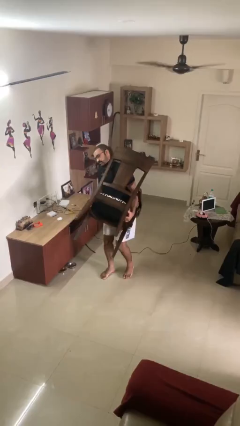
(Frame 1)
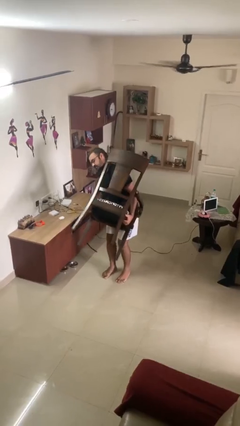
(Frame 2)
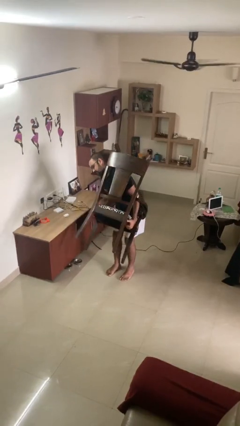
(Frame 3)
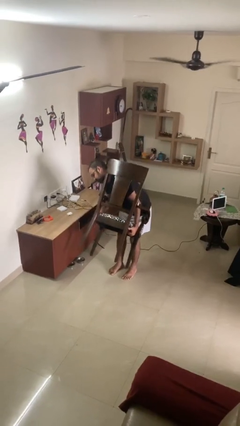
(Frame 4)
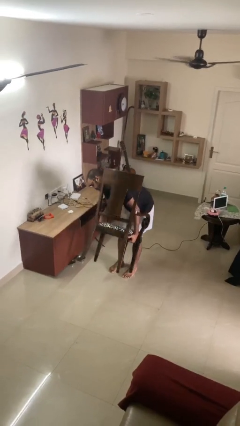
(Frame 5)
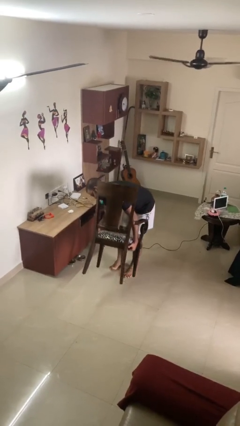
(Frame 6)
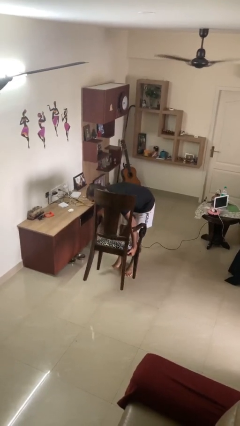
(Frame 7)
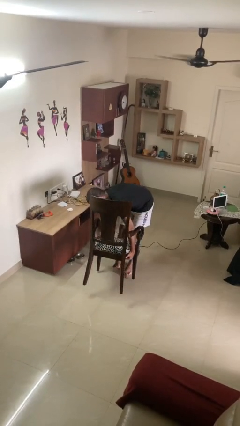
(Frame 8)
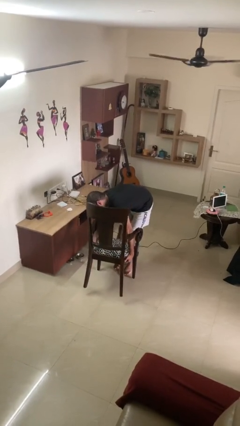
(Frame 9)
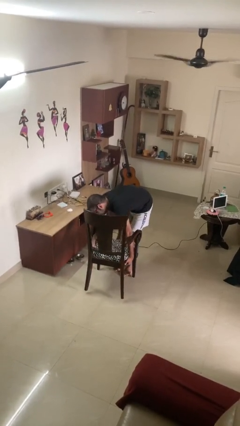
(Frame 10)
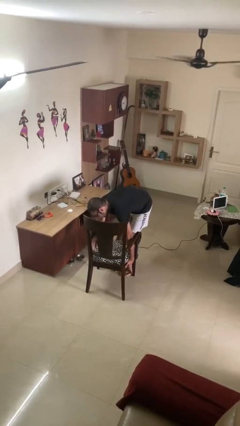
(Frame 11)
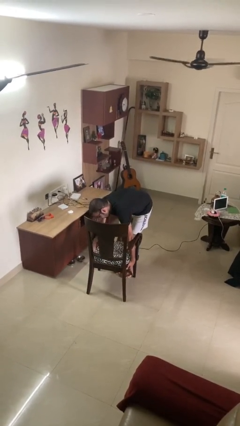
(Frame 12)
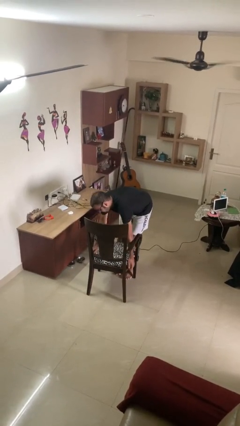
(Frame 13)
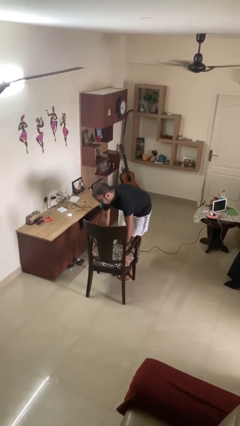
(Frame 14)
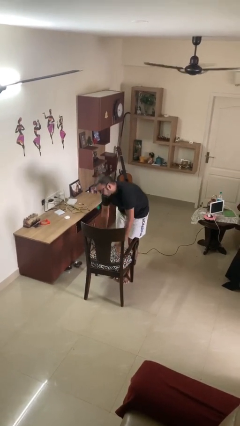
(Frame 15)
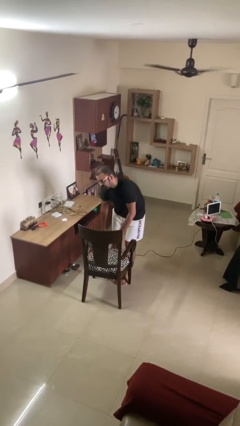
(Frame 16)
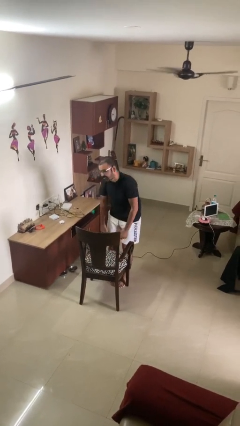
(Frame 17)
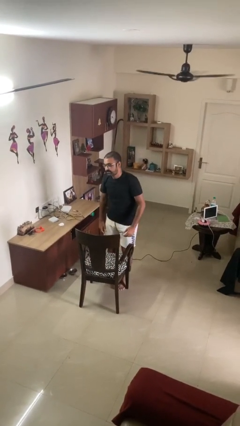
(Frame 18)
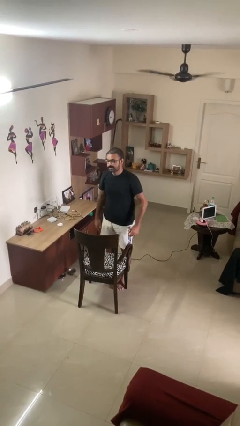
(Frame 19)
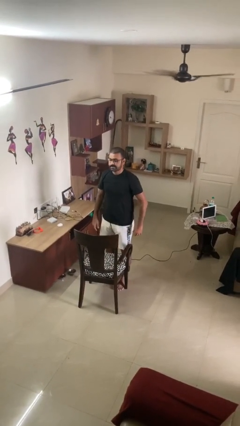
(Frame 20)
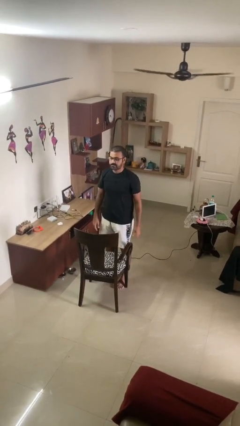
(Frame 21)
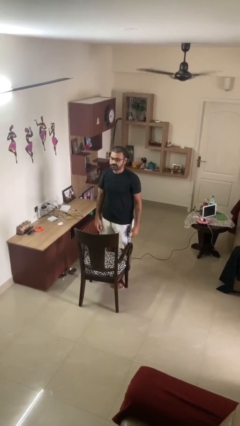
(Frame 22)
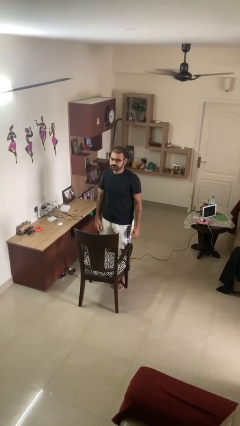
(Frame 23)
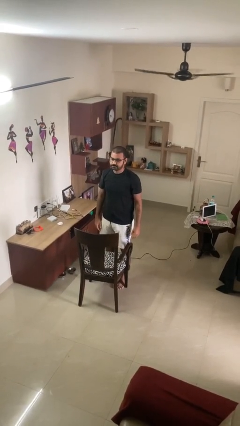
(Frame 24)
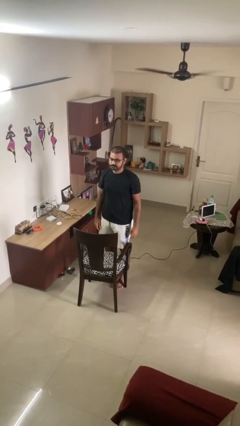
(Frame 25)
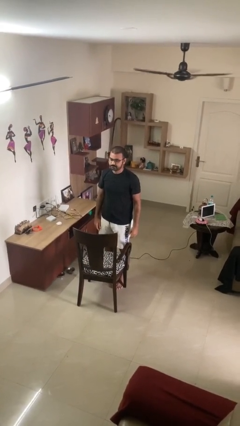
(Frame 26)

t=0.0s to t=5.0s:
person puts down object on floor

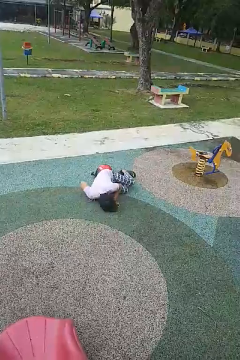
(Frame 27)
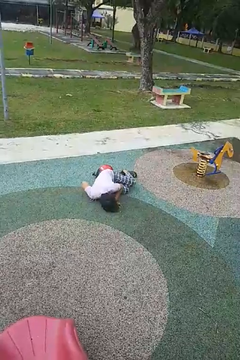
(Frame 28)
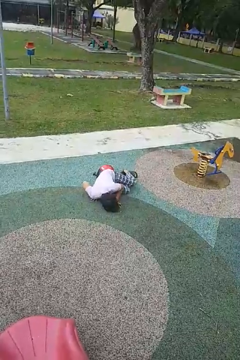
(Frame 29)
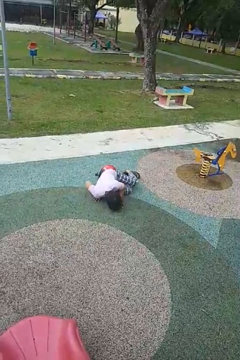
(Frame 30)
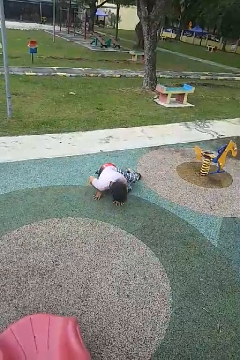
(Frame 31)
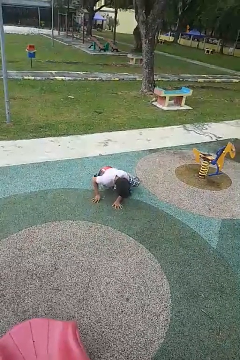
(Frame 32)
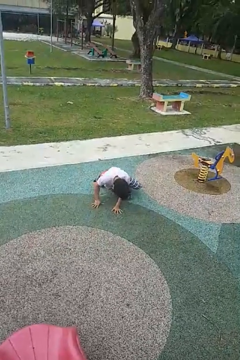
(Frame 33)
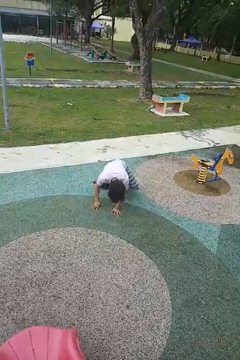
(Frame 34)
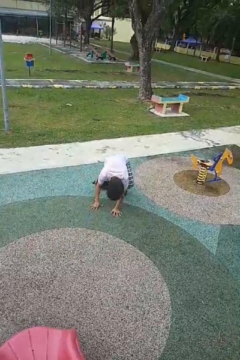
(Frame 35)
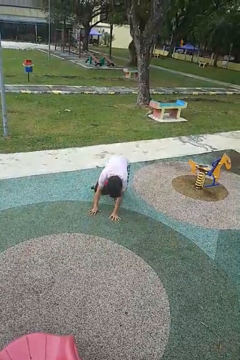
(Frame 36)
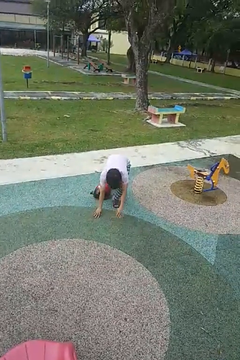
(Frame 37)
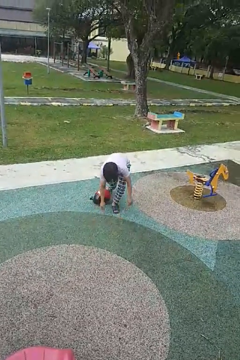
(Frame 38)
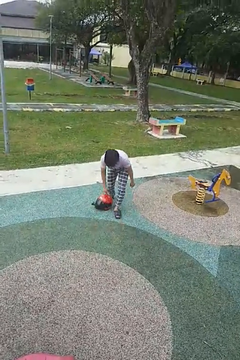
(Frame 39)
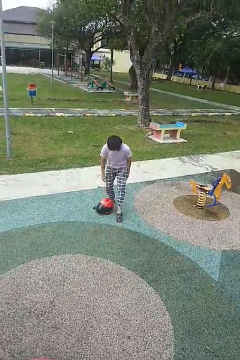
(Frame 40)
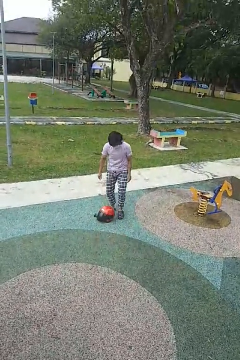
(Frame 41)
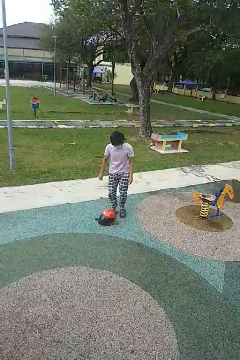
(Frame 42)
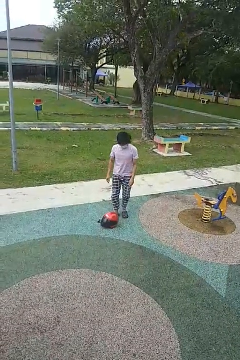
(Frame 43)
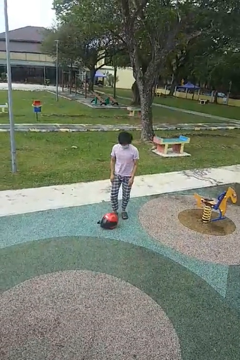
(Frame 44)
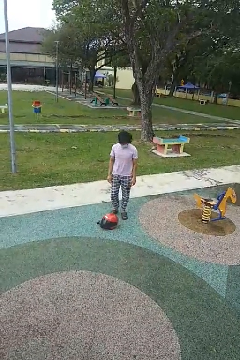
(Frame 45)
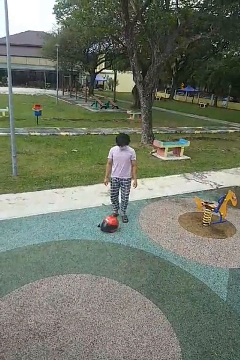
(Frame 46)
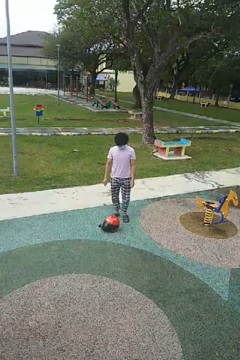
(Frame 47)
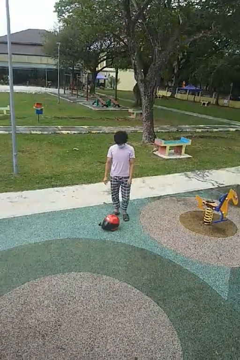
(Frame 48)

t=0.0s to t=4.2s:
person stands up from floor

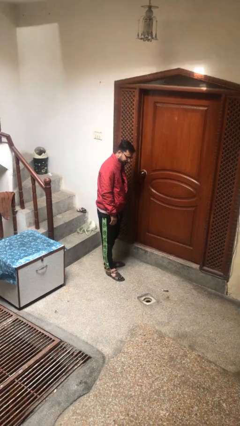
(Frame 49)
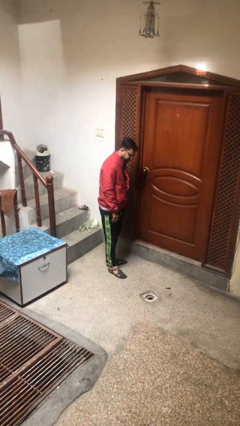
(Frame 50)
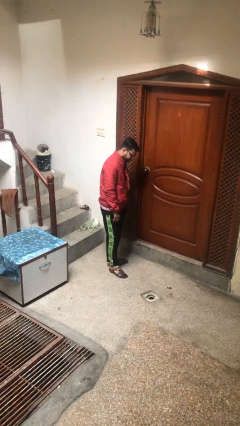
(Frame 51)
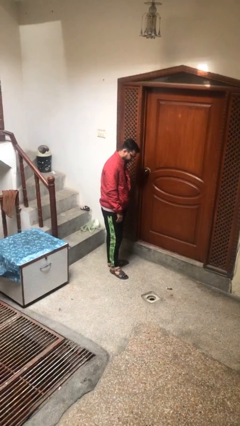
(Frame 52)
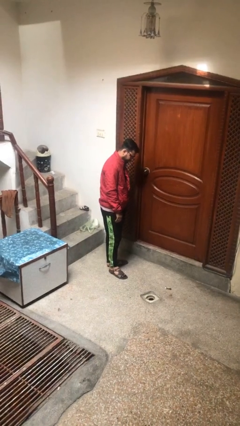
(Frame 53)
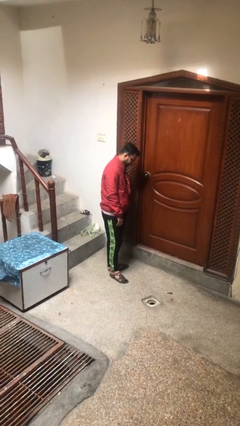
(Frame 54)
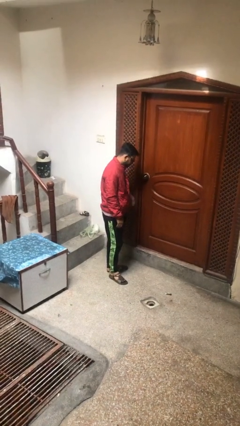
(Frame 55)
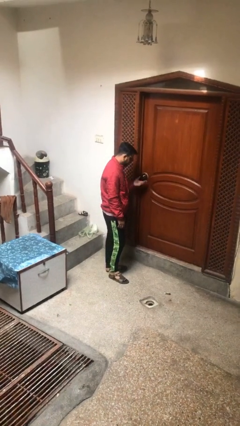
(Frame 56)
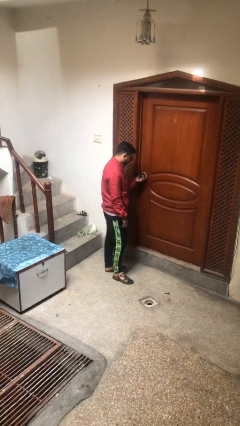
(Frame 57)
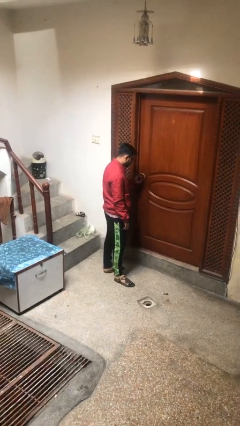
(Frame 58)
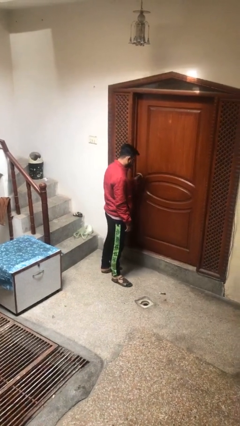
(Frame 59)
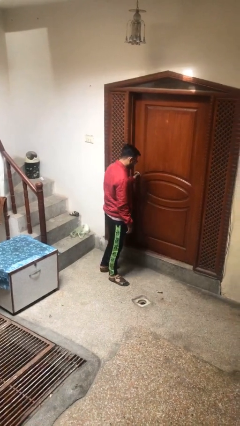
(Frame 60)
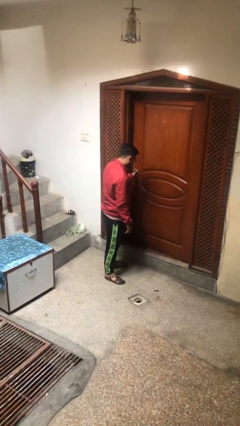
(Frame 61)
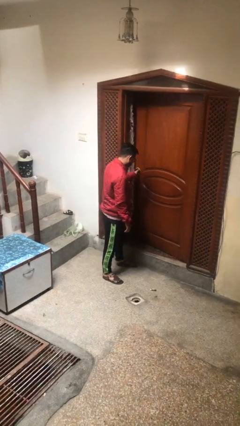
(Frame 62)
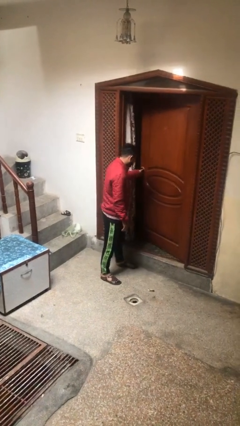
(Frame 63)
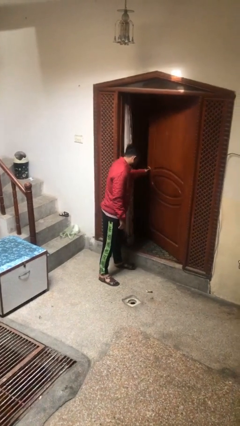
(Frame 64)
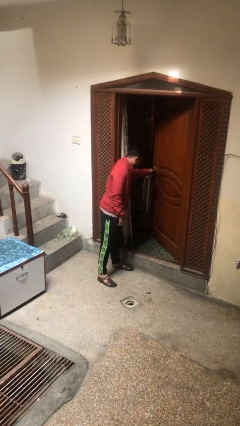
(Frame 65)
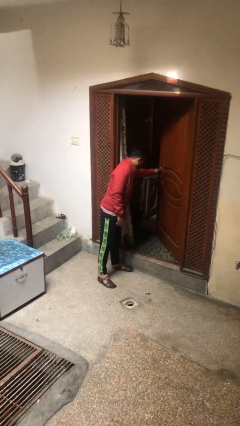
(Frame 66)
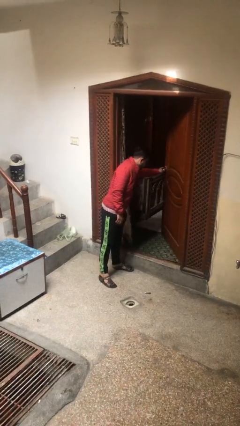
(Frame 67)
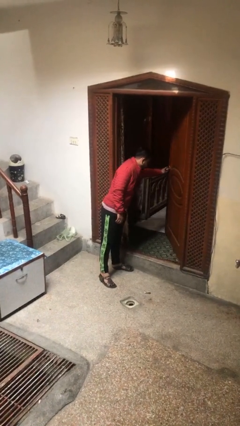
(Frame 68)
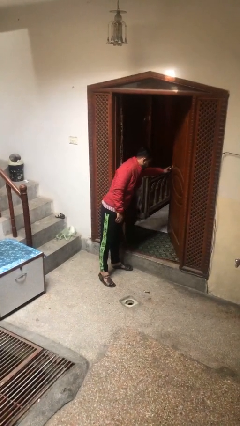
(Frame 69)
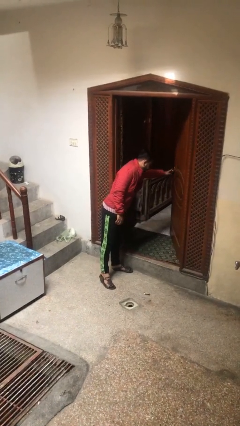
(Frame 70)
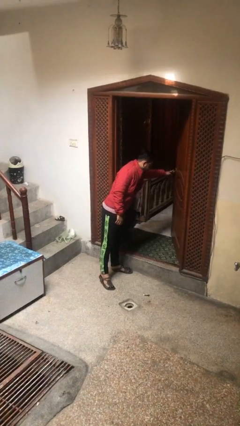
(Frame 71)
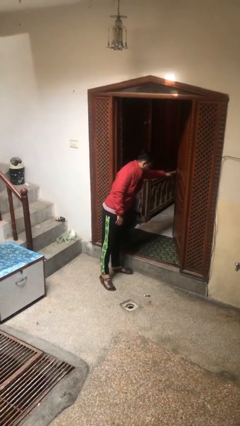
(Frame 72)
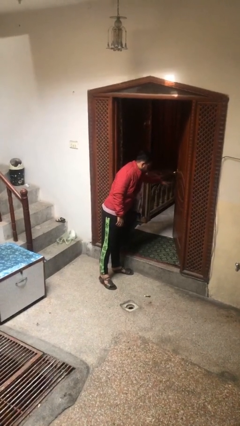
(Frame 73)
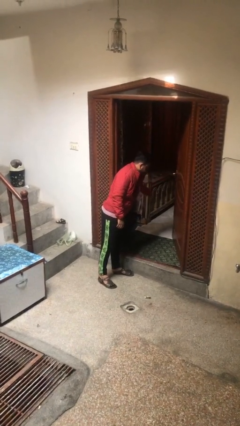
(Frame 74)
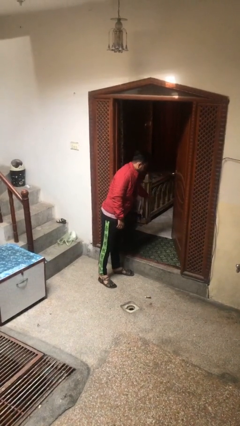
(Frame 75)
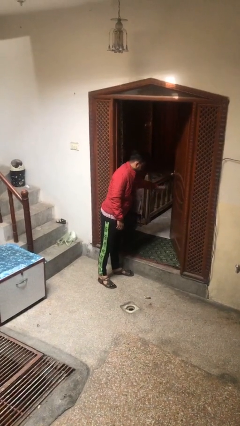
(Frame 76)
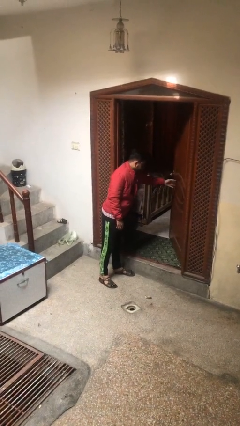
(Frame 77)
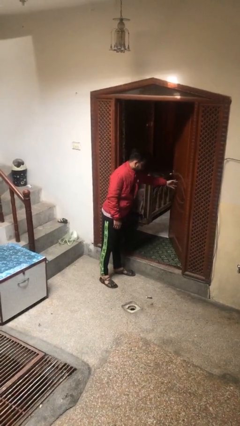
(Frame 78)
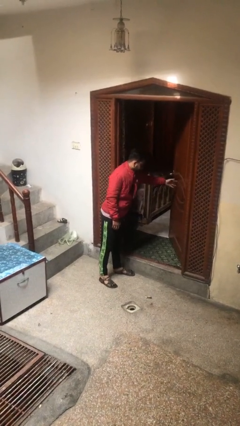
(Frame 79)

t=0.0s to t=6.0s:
person opens facility door

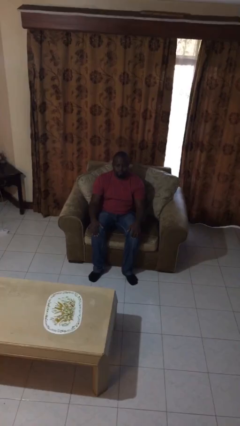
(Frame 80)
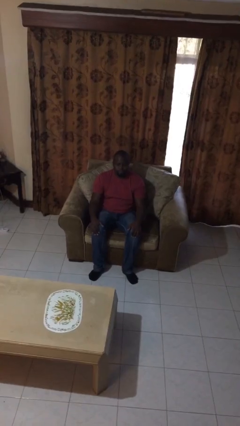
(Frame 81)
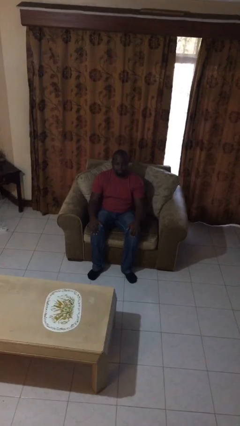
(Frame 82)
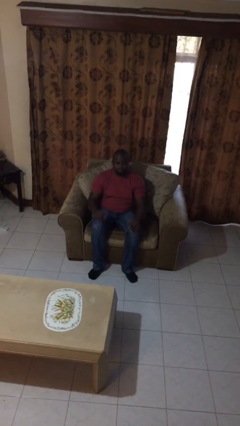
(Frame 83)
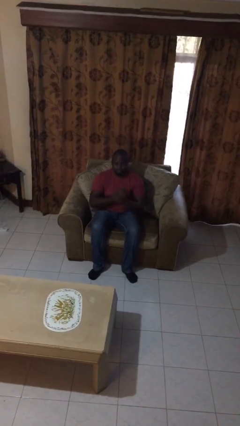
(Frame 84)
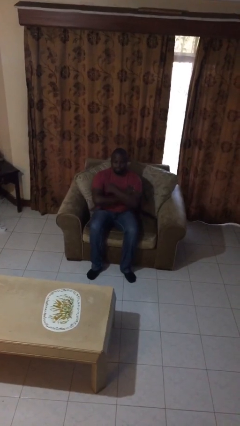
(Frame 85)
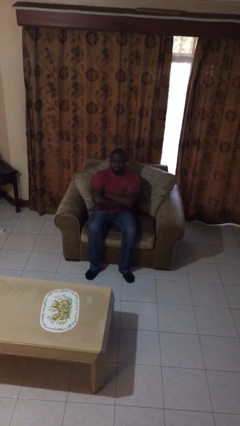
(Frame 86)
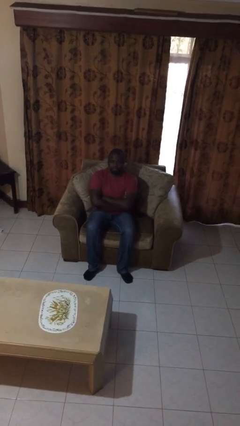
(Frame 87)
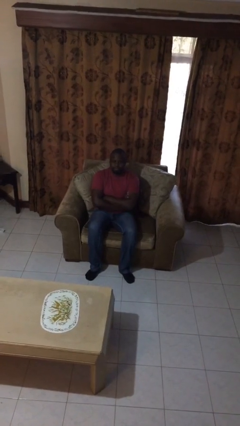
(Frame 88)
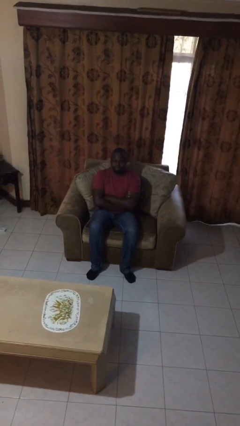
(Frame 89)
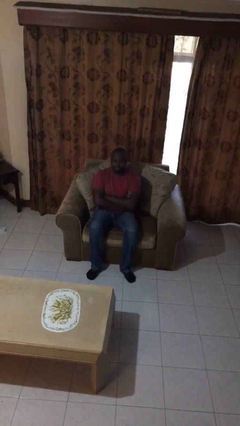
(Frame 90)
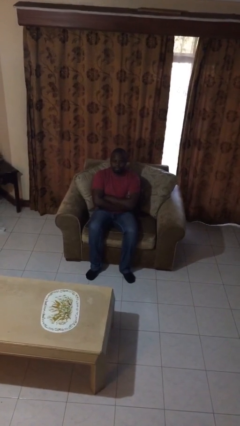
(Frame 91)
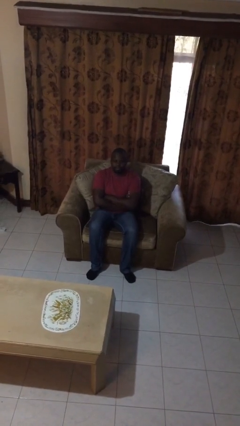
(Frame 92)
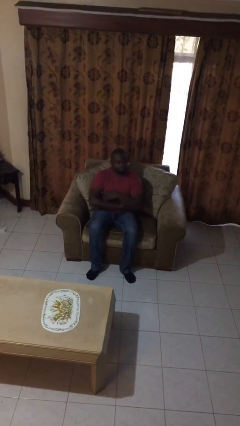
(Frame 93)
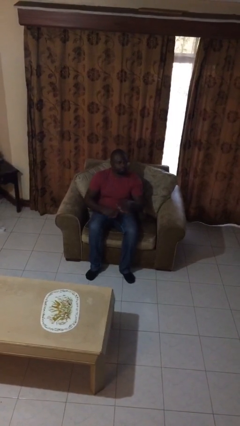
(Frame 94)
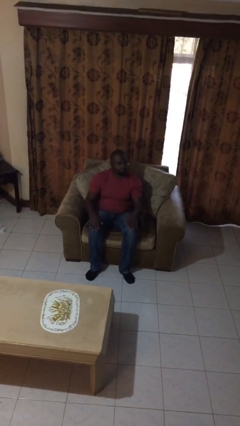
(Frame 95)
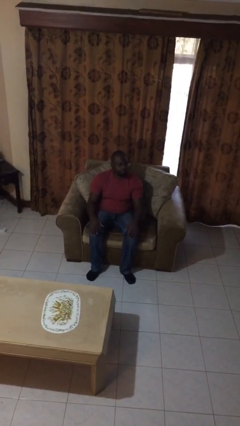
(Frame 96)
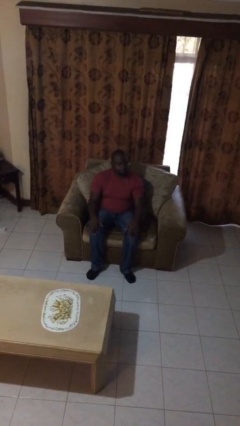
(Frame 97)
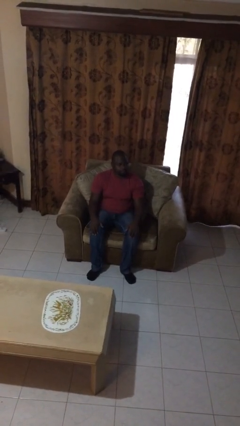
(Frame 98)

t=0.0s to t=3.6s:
person crosses arms
